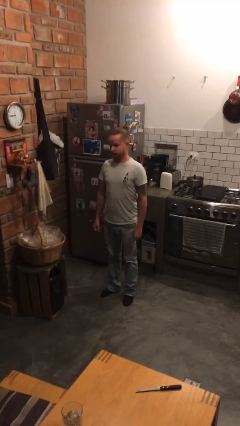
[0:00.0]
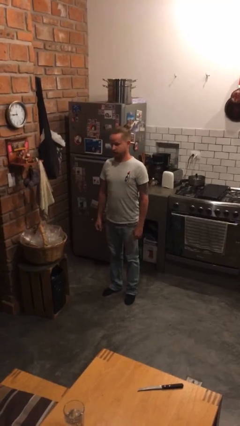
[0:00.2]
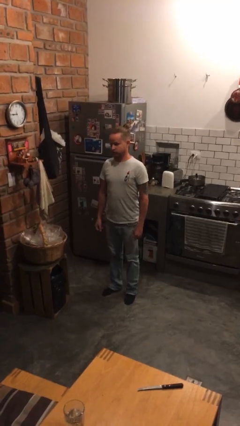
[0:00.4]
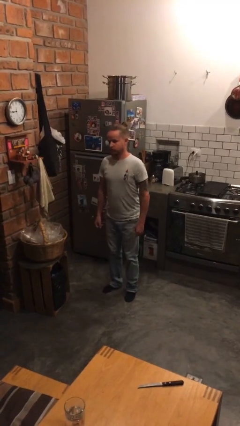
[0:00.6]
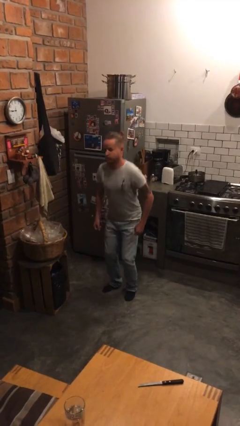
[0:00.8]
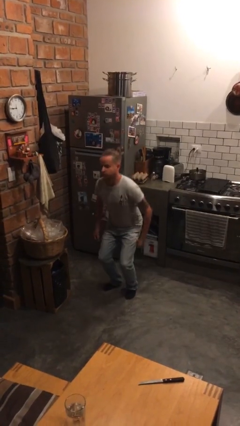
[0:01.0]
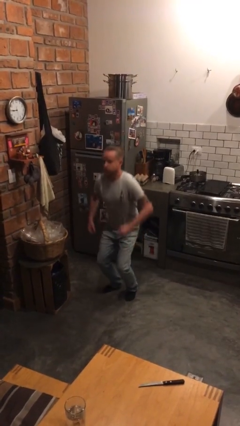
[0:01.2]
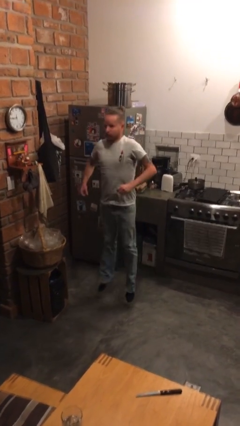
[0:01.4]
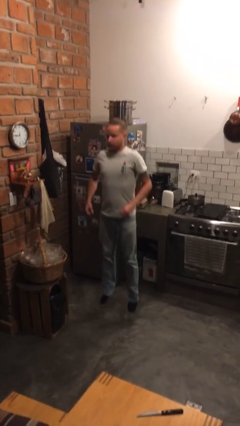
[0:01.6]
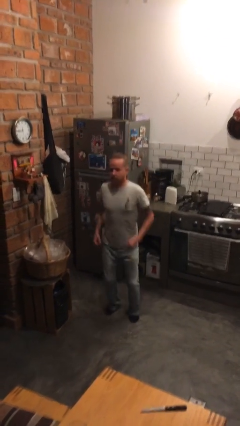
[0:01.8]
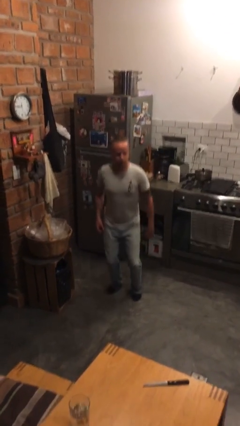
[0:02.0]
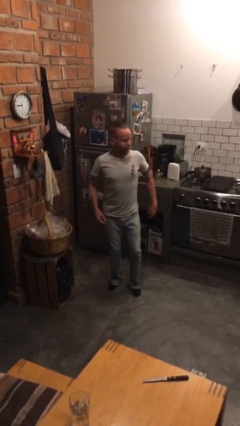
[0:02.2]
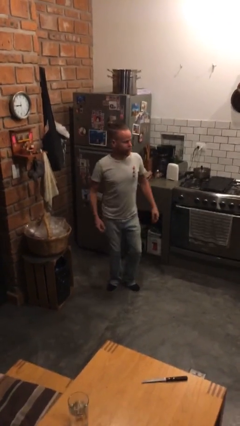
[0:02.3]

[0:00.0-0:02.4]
person jumps

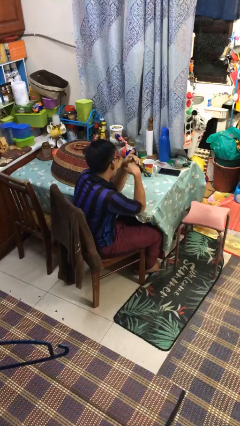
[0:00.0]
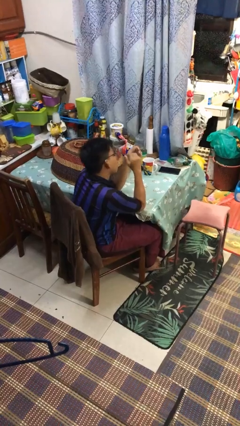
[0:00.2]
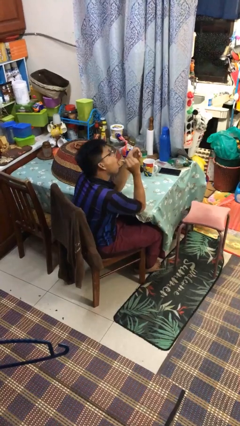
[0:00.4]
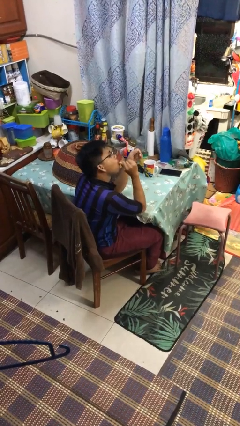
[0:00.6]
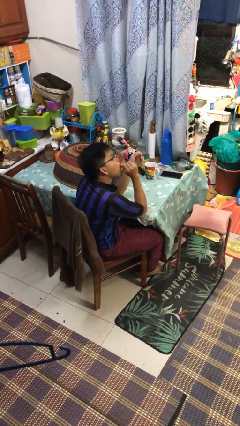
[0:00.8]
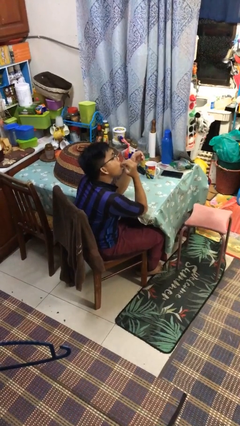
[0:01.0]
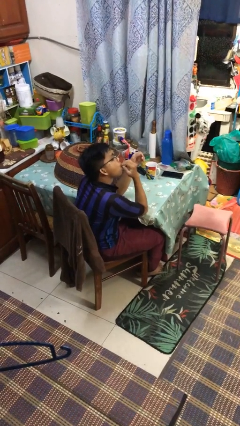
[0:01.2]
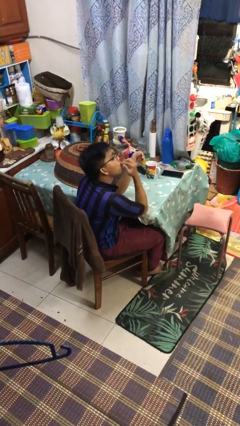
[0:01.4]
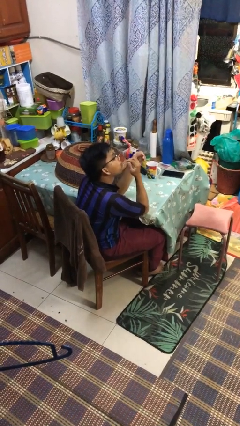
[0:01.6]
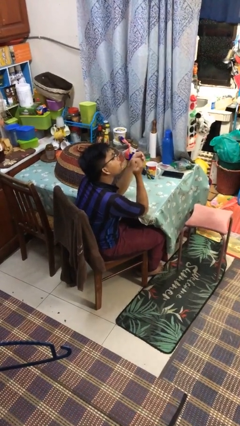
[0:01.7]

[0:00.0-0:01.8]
person licks fingers

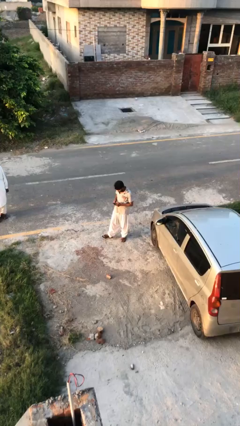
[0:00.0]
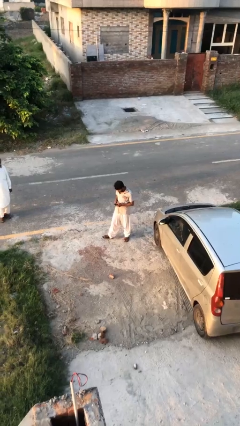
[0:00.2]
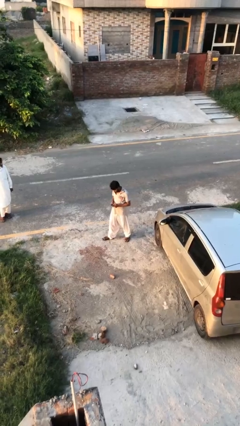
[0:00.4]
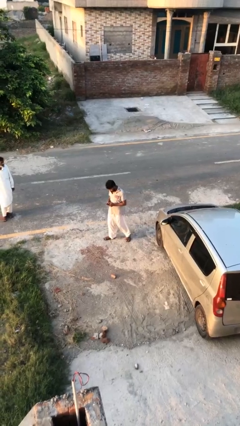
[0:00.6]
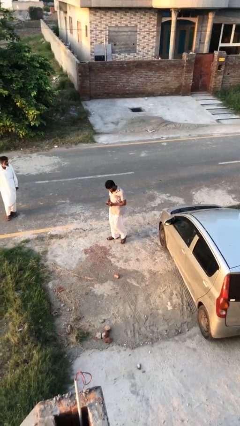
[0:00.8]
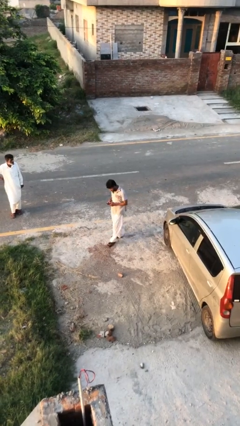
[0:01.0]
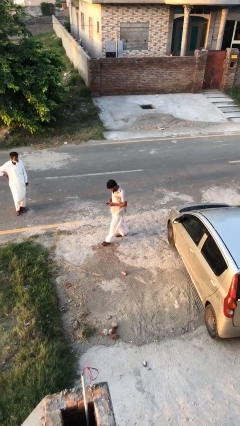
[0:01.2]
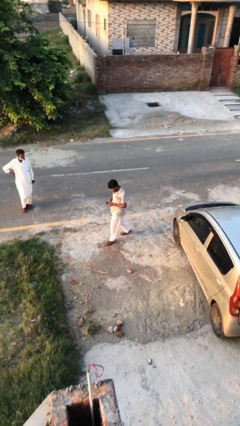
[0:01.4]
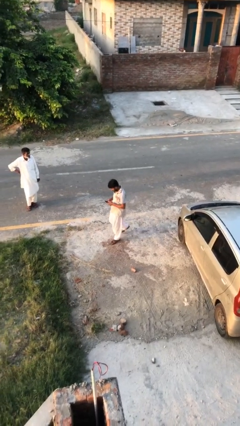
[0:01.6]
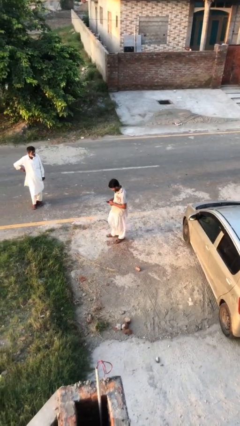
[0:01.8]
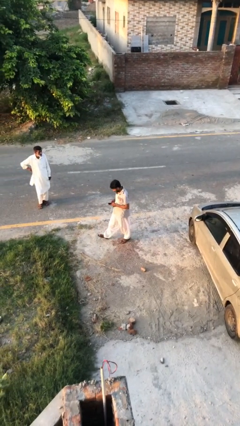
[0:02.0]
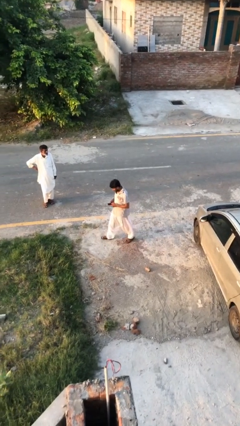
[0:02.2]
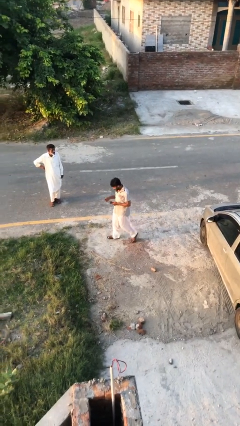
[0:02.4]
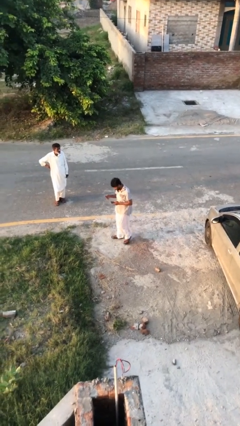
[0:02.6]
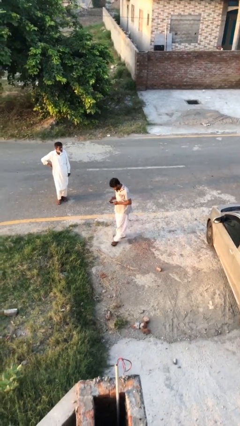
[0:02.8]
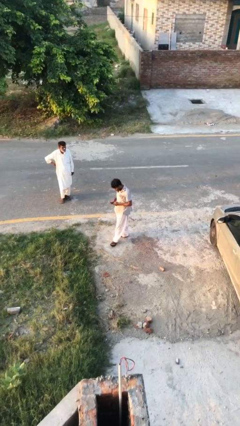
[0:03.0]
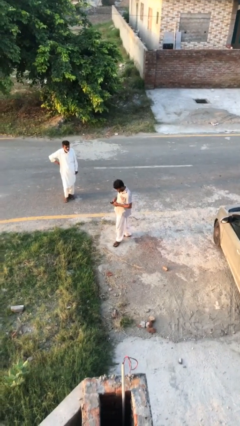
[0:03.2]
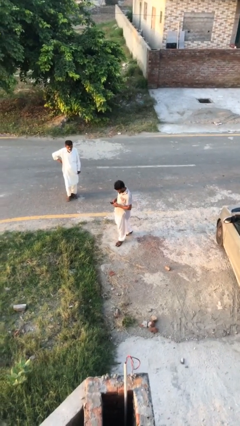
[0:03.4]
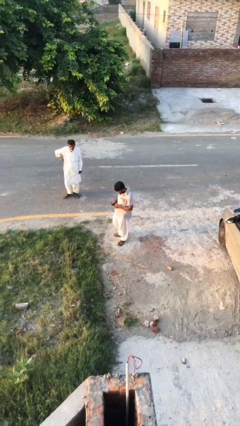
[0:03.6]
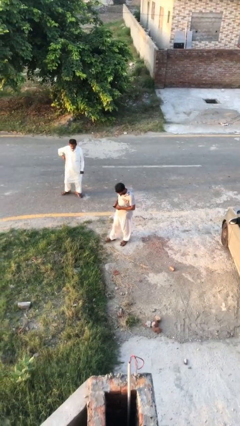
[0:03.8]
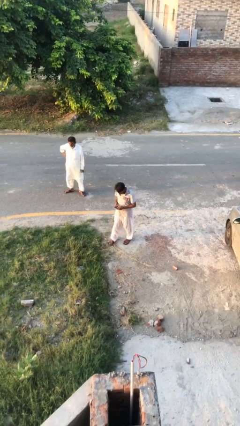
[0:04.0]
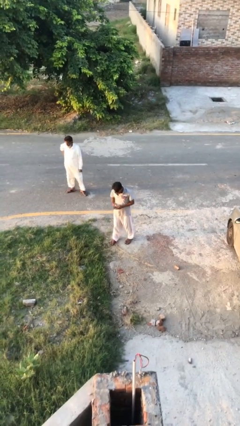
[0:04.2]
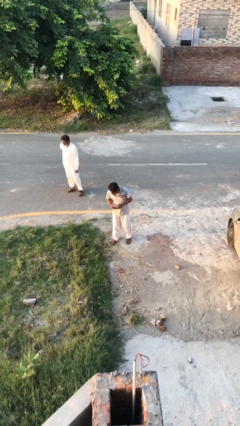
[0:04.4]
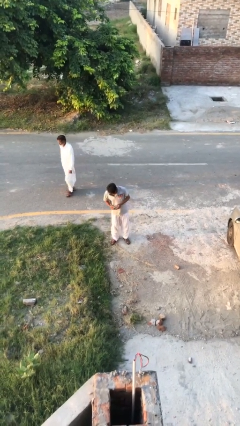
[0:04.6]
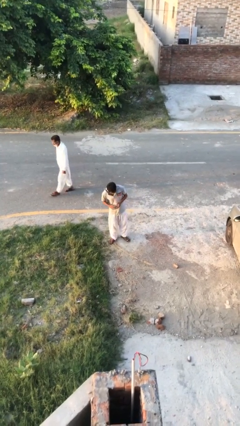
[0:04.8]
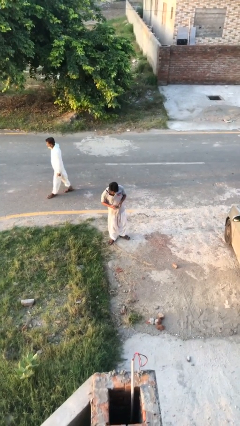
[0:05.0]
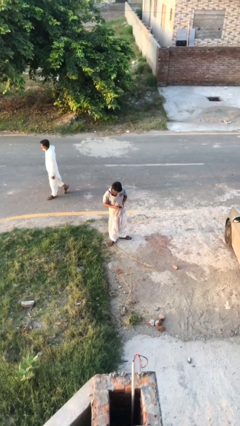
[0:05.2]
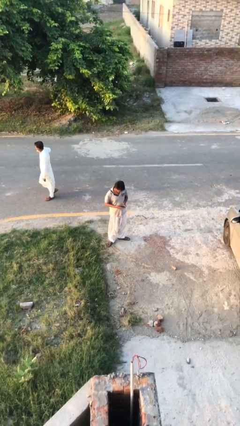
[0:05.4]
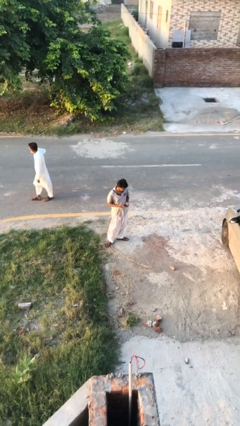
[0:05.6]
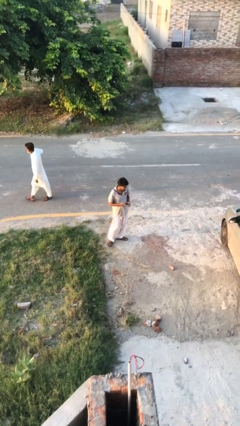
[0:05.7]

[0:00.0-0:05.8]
person texts on phone

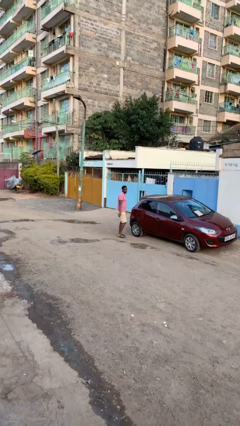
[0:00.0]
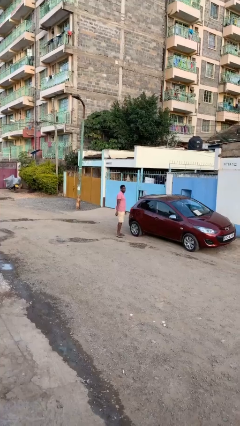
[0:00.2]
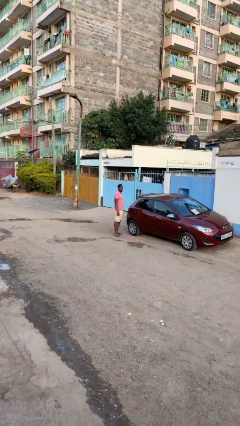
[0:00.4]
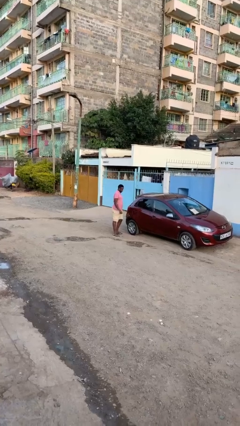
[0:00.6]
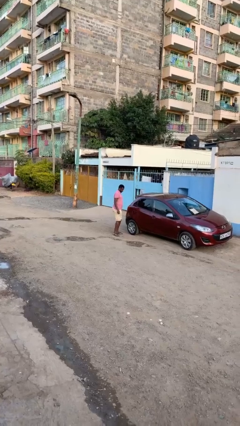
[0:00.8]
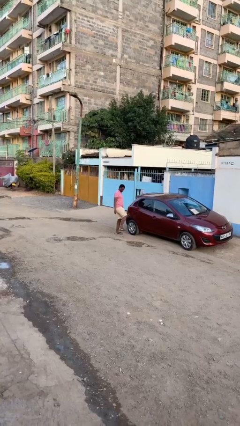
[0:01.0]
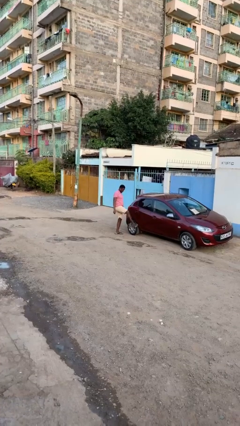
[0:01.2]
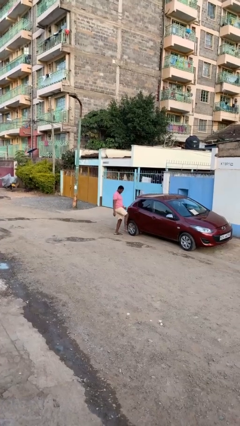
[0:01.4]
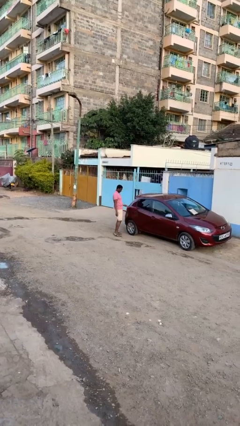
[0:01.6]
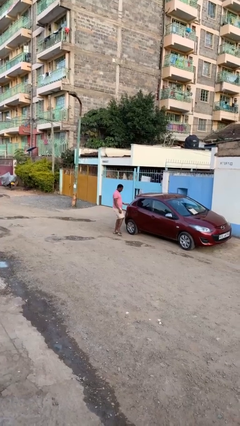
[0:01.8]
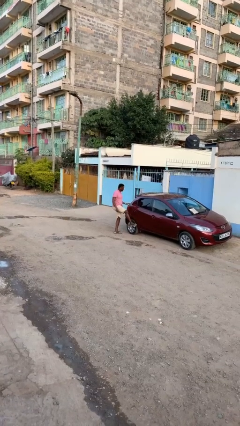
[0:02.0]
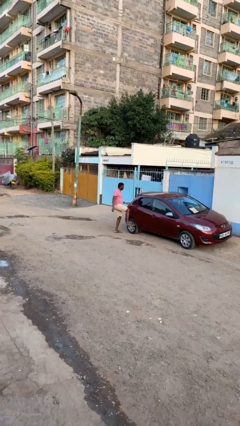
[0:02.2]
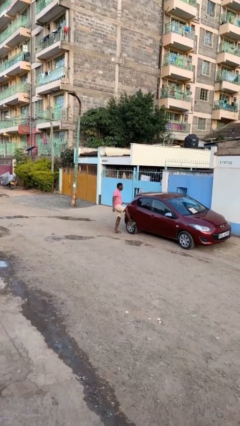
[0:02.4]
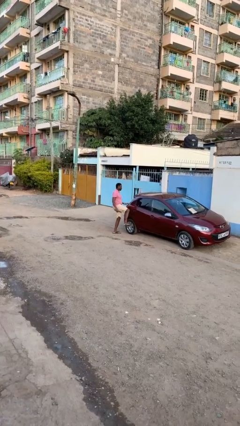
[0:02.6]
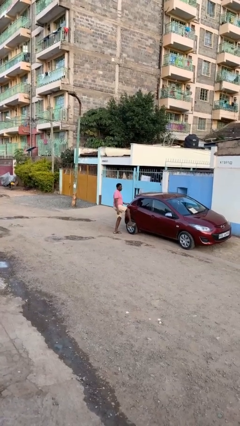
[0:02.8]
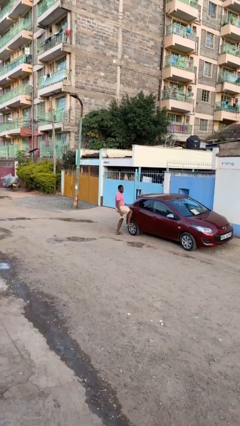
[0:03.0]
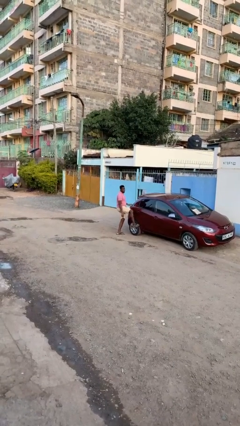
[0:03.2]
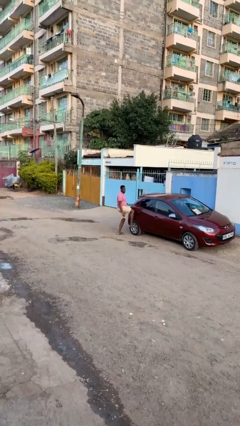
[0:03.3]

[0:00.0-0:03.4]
person kicks car tires

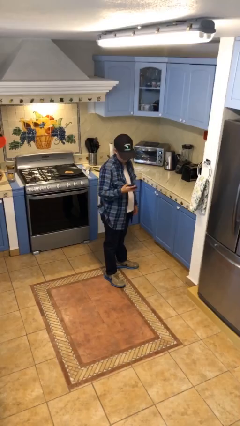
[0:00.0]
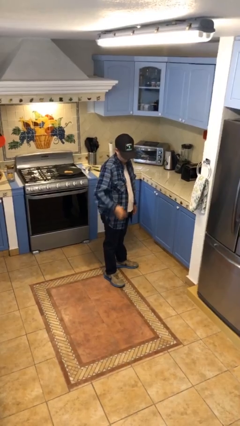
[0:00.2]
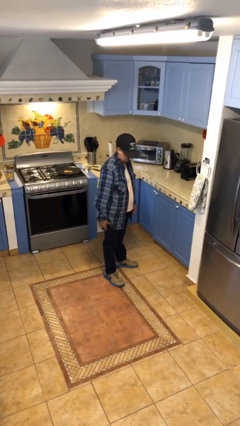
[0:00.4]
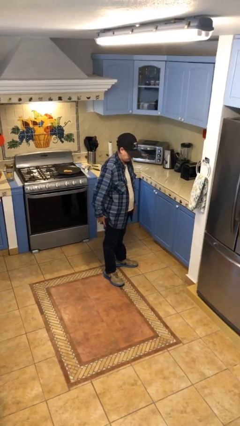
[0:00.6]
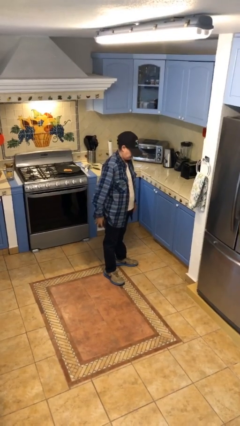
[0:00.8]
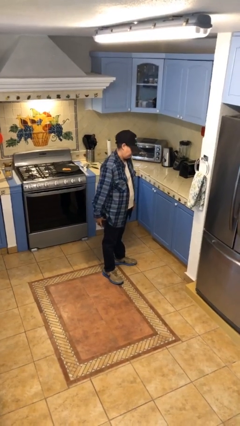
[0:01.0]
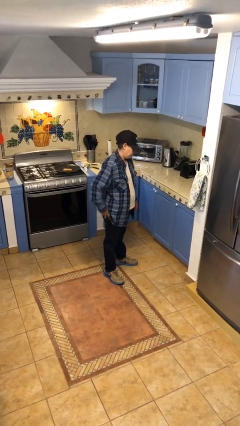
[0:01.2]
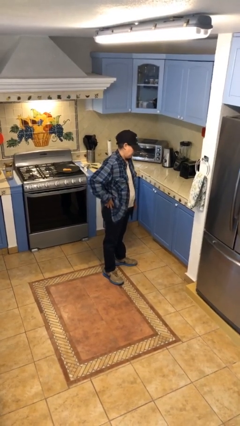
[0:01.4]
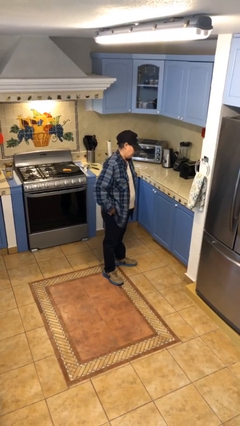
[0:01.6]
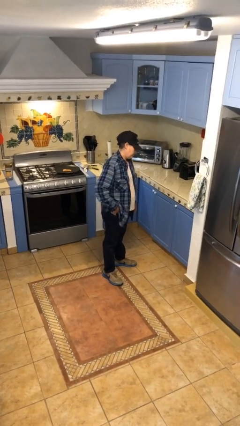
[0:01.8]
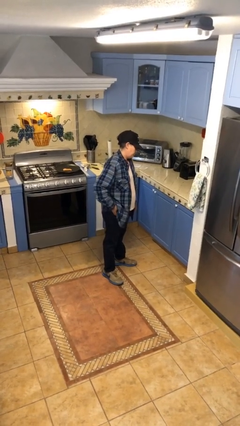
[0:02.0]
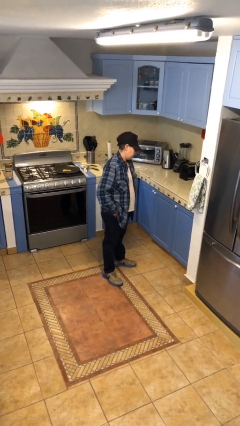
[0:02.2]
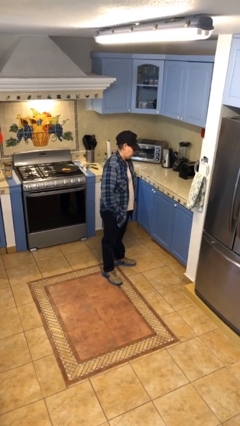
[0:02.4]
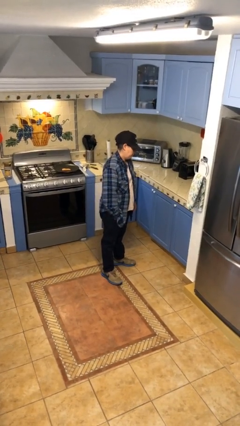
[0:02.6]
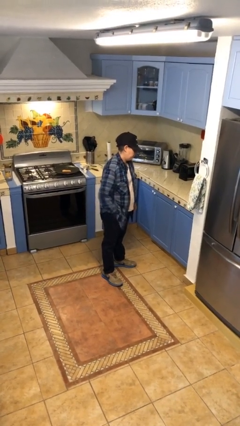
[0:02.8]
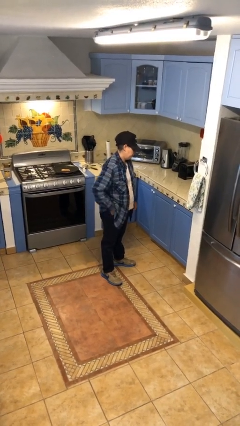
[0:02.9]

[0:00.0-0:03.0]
person puts phone into pocket

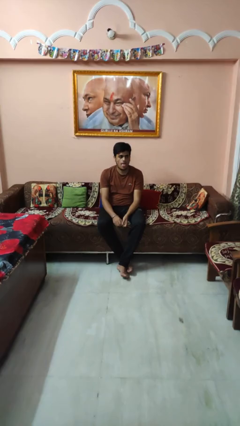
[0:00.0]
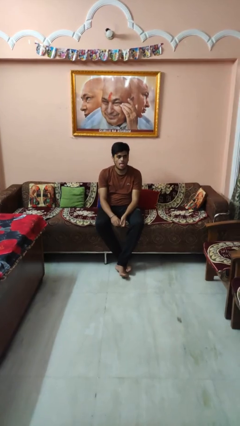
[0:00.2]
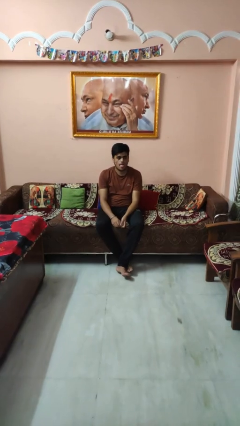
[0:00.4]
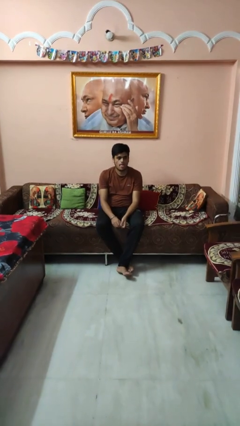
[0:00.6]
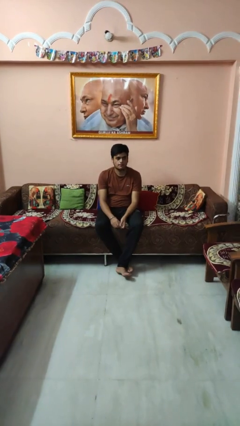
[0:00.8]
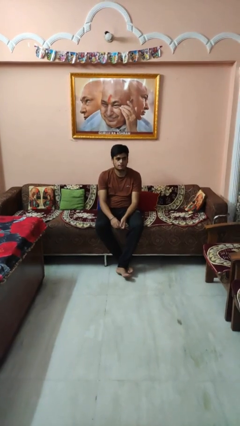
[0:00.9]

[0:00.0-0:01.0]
person sticks out tongue
